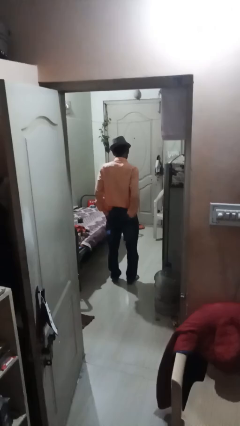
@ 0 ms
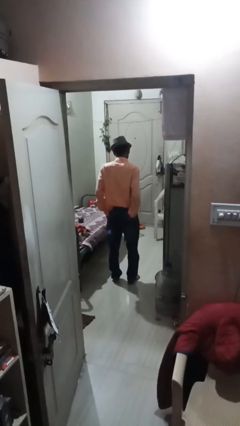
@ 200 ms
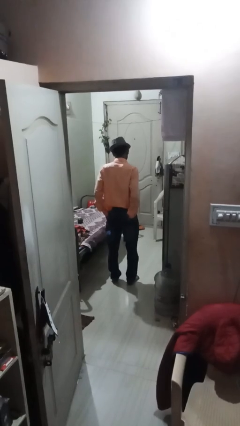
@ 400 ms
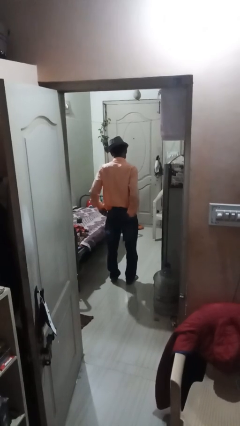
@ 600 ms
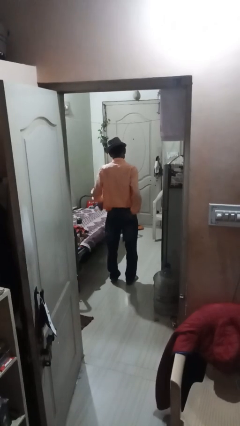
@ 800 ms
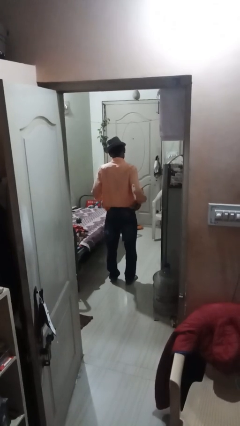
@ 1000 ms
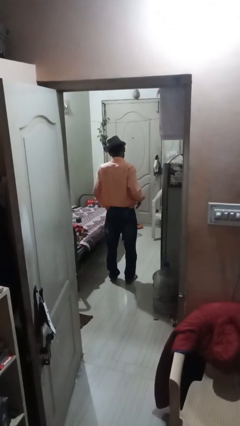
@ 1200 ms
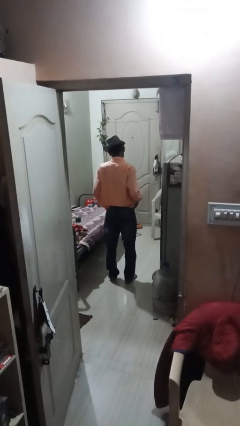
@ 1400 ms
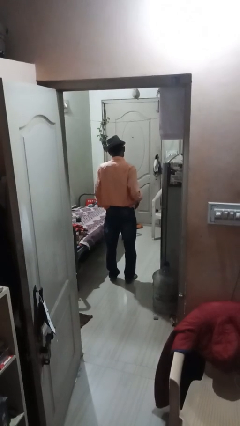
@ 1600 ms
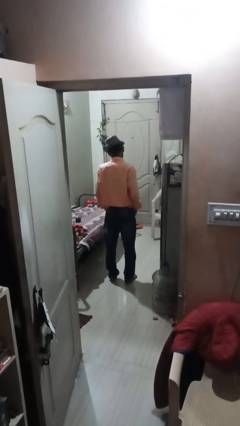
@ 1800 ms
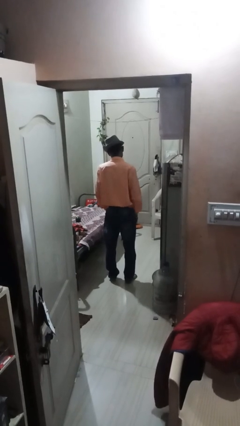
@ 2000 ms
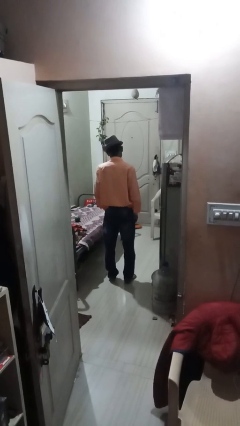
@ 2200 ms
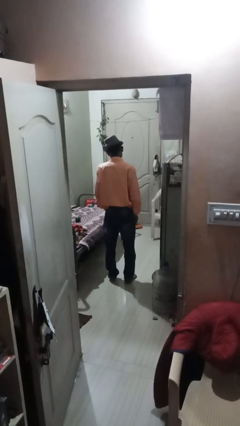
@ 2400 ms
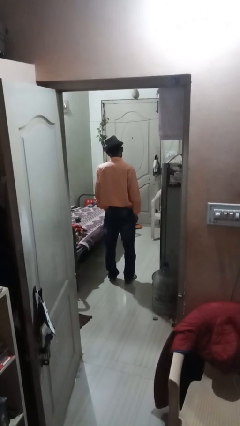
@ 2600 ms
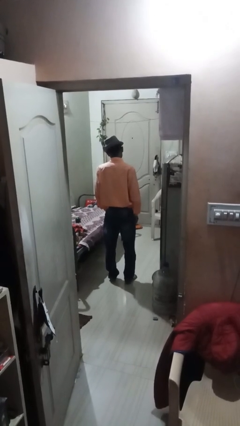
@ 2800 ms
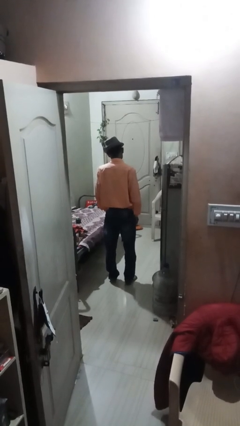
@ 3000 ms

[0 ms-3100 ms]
person puts hands in back pockets

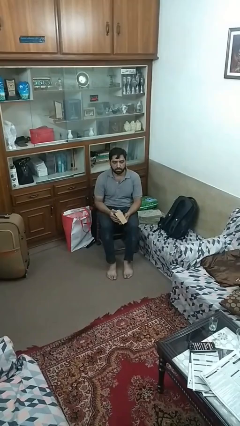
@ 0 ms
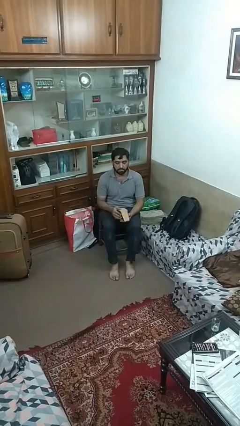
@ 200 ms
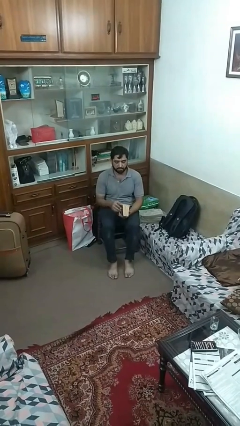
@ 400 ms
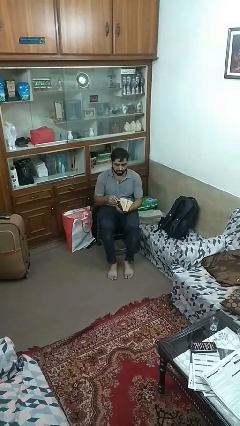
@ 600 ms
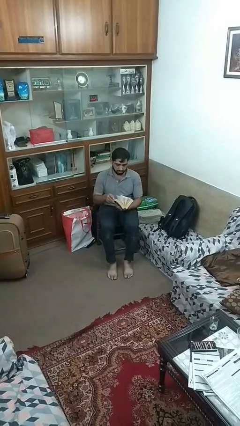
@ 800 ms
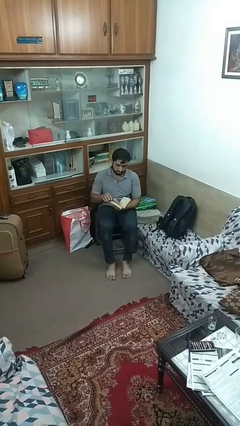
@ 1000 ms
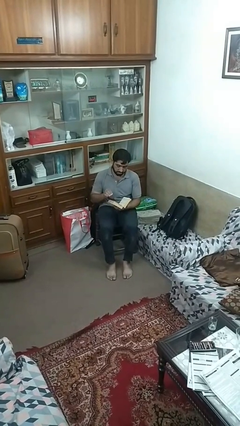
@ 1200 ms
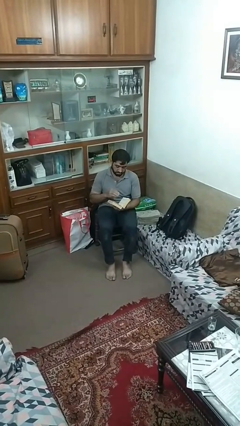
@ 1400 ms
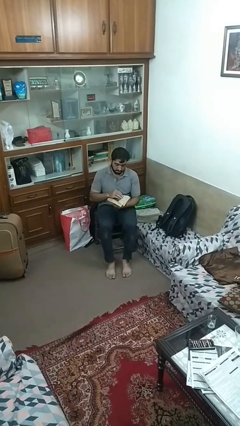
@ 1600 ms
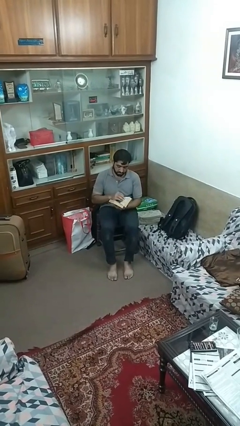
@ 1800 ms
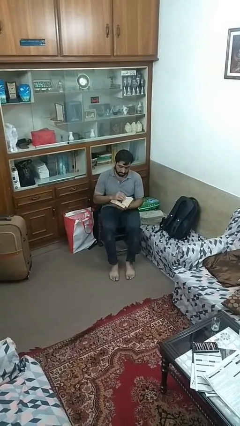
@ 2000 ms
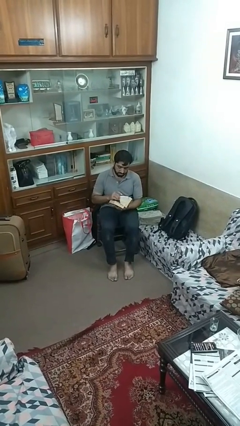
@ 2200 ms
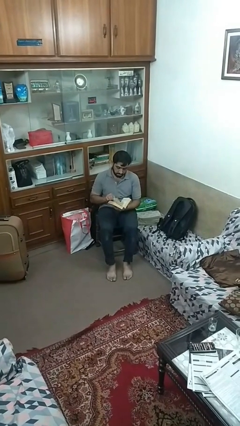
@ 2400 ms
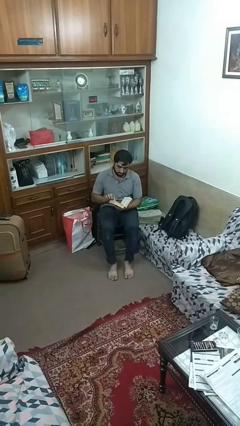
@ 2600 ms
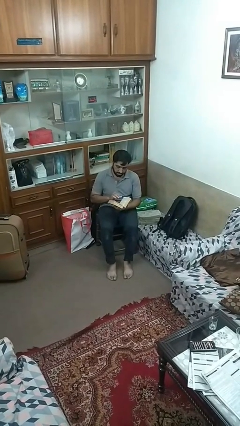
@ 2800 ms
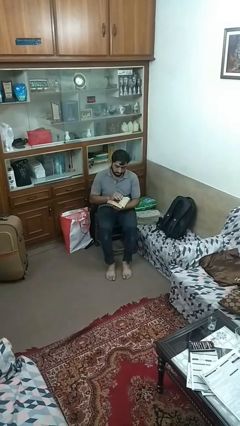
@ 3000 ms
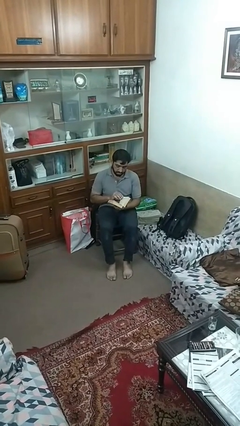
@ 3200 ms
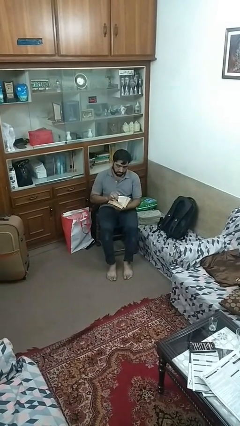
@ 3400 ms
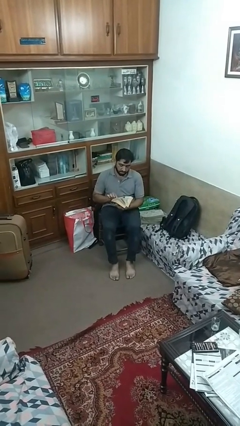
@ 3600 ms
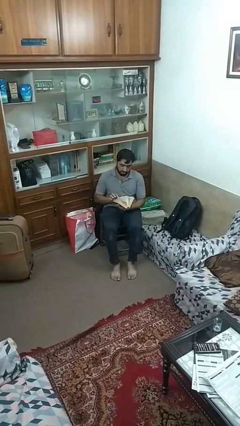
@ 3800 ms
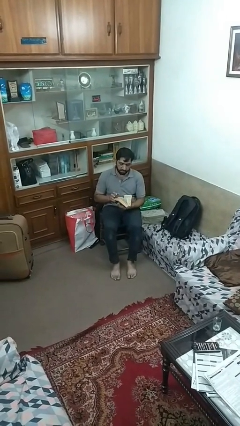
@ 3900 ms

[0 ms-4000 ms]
person reads book

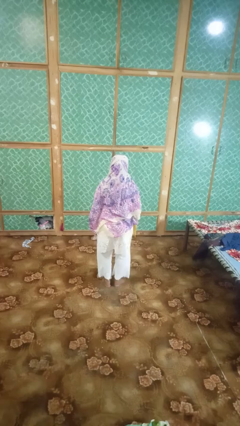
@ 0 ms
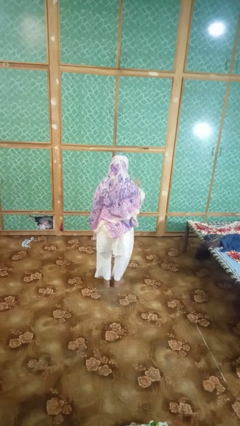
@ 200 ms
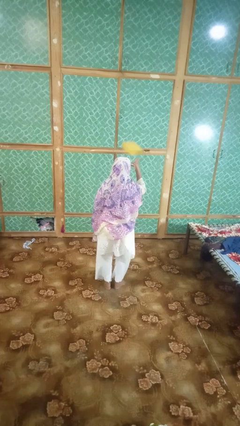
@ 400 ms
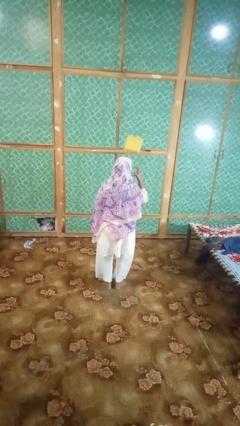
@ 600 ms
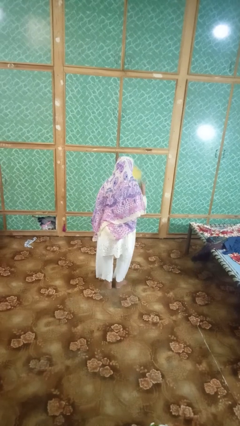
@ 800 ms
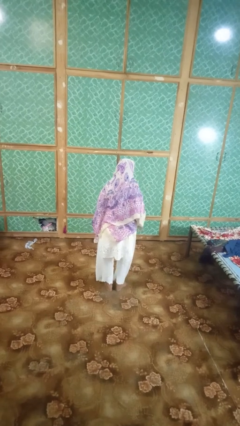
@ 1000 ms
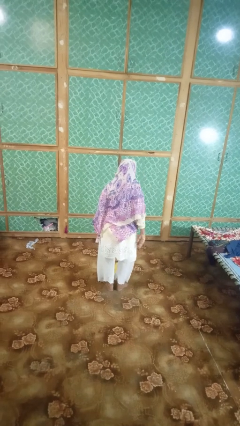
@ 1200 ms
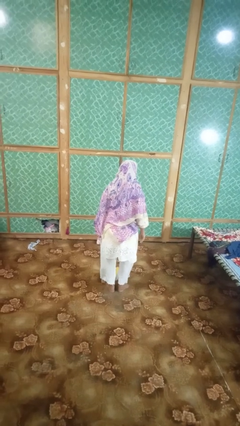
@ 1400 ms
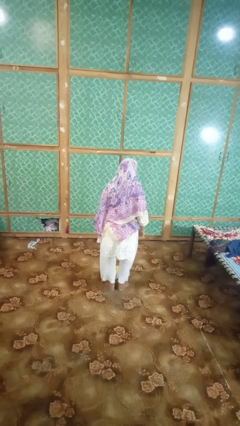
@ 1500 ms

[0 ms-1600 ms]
person throws object into air

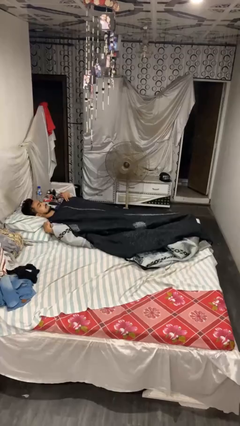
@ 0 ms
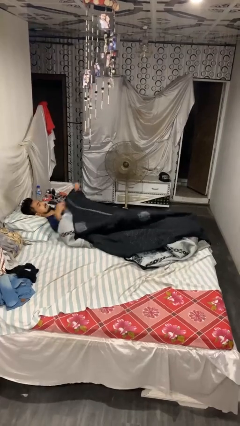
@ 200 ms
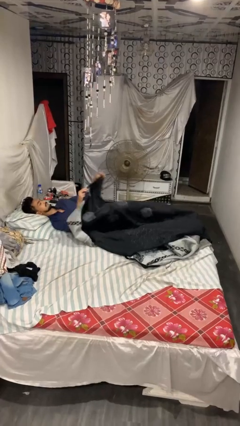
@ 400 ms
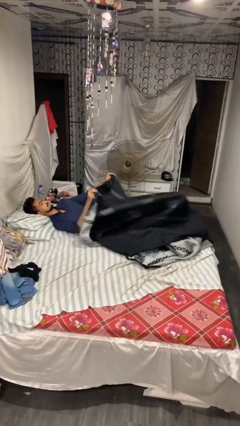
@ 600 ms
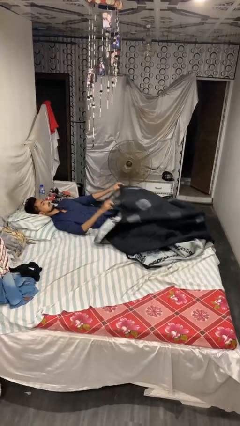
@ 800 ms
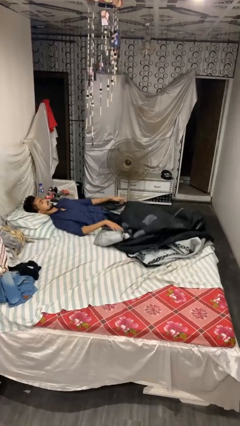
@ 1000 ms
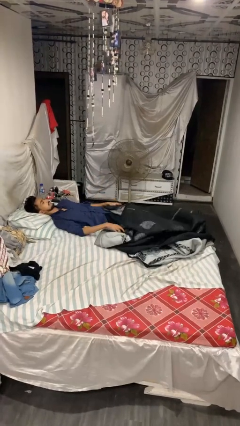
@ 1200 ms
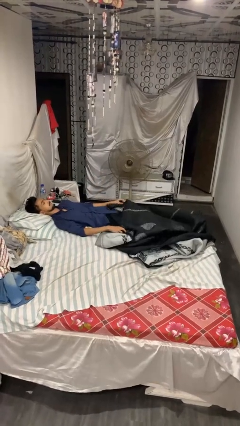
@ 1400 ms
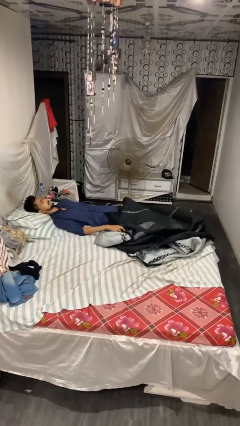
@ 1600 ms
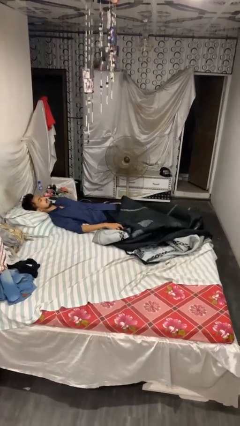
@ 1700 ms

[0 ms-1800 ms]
person uncovers with blanket

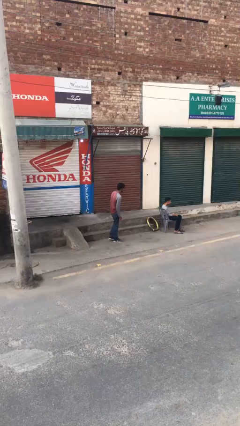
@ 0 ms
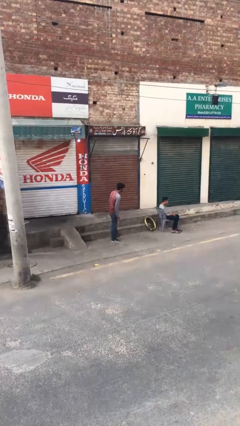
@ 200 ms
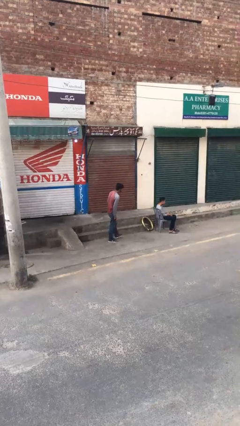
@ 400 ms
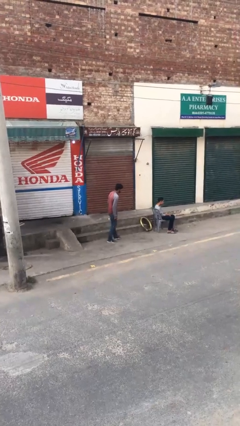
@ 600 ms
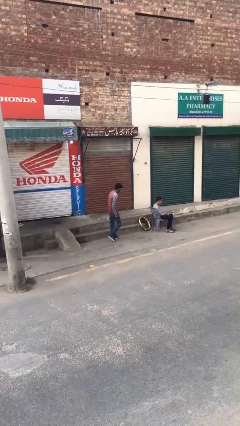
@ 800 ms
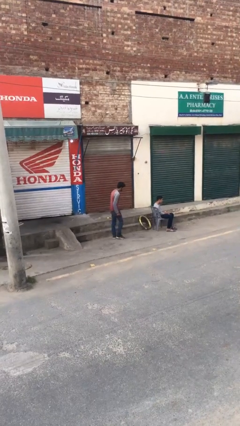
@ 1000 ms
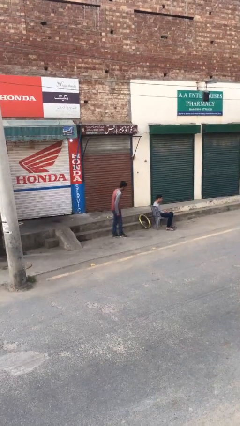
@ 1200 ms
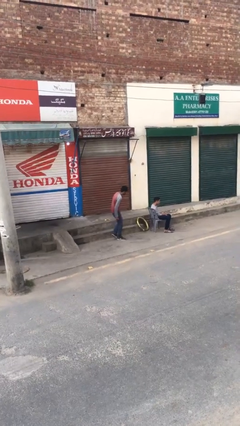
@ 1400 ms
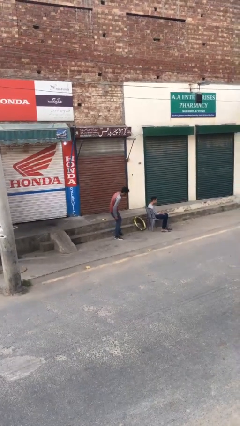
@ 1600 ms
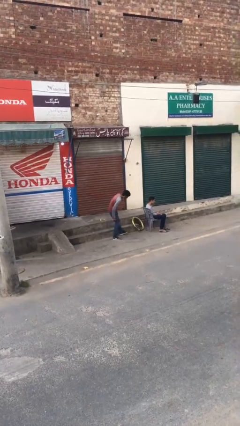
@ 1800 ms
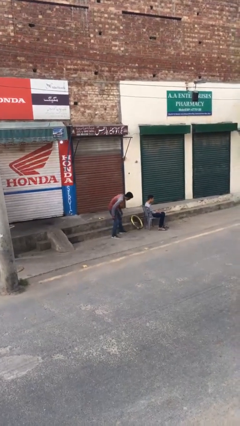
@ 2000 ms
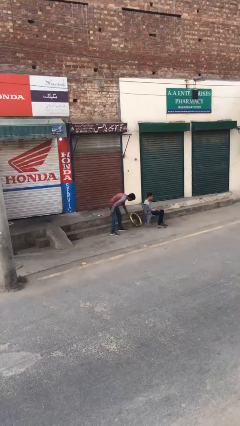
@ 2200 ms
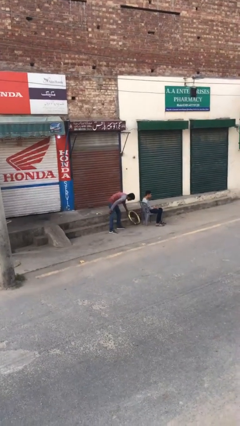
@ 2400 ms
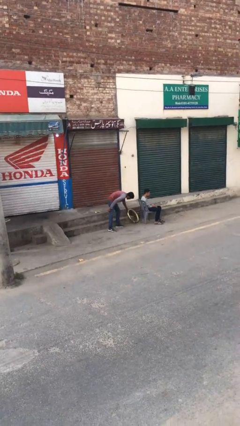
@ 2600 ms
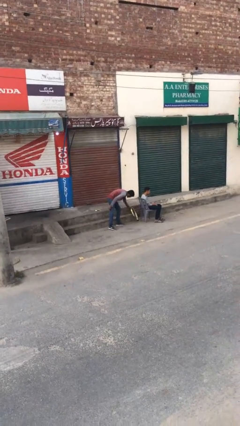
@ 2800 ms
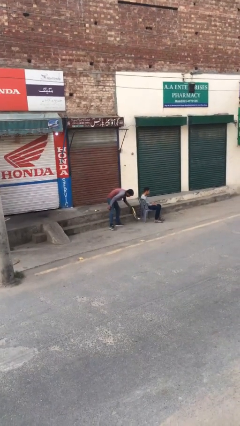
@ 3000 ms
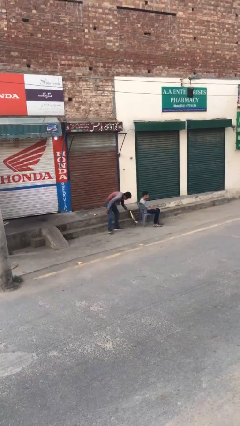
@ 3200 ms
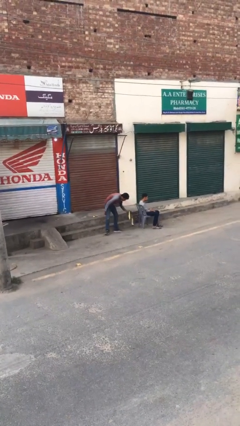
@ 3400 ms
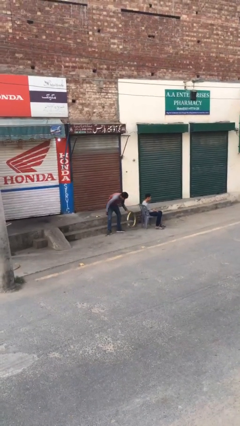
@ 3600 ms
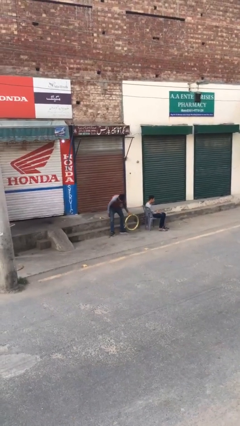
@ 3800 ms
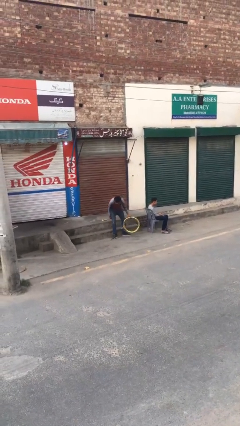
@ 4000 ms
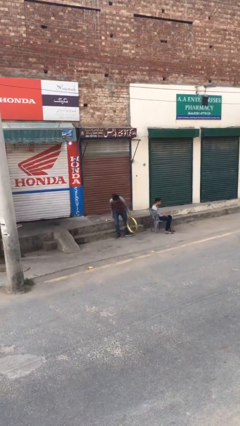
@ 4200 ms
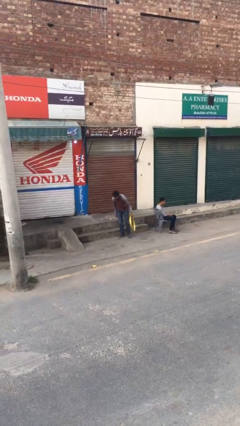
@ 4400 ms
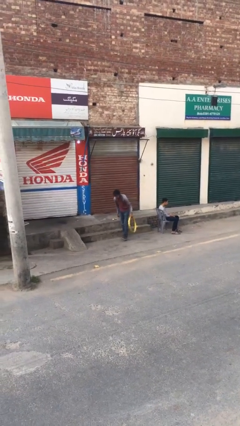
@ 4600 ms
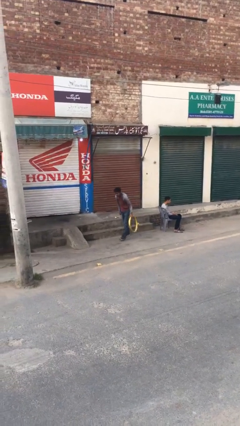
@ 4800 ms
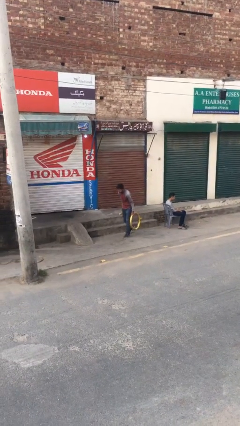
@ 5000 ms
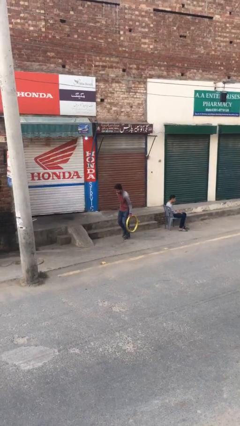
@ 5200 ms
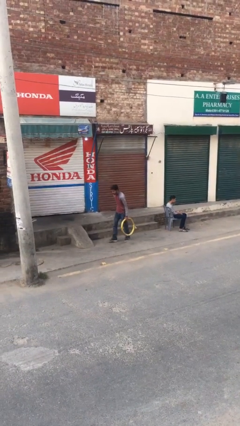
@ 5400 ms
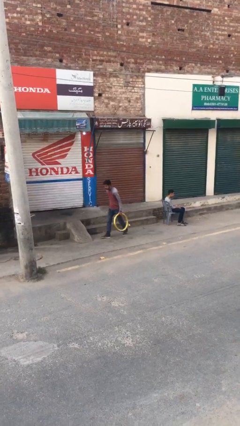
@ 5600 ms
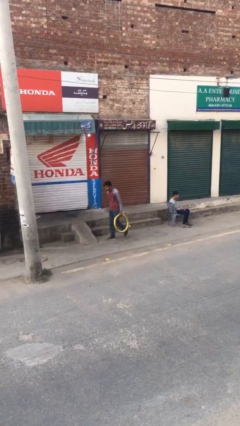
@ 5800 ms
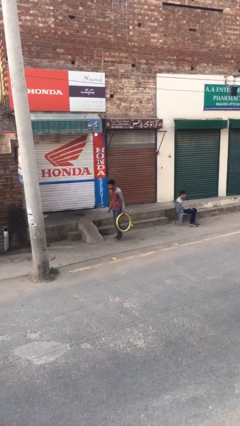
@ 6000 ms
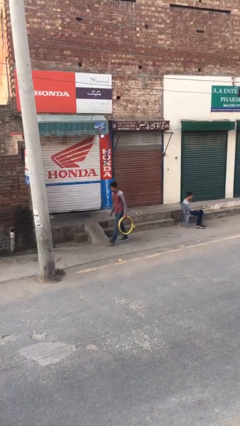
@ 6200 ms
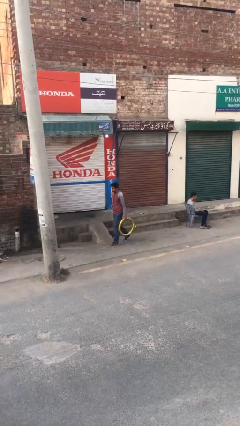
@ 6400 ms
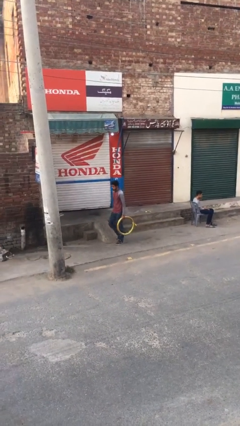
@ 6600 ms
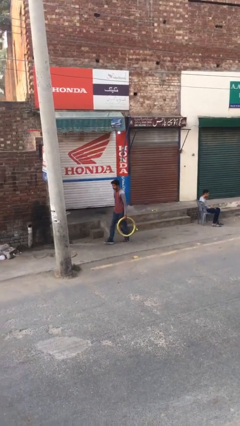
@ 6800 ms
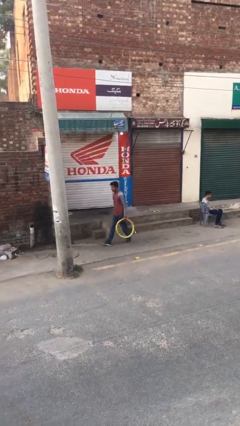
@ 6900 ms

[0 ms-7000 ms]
person steals object from person

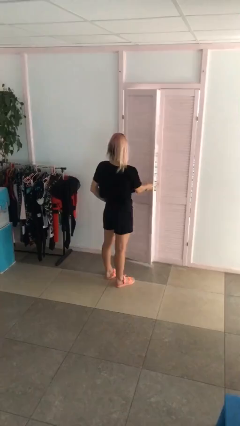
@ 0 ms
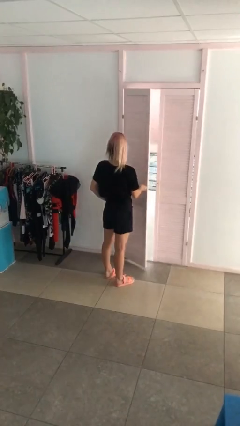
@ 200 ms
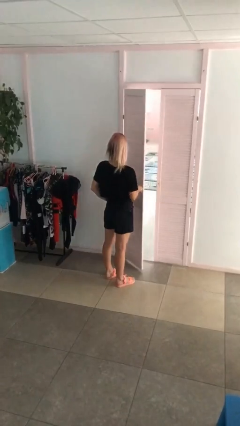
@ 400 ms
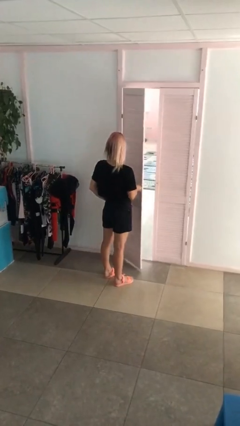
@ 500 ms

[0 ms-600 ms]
person opens facility door
